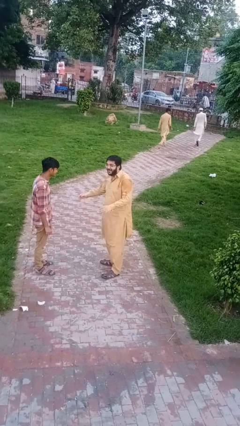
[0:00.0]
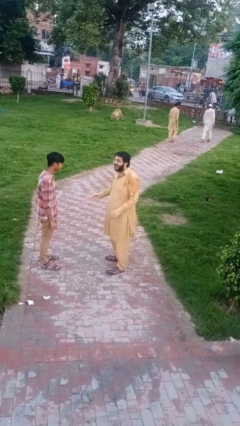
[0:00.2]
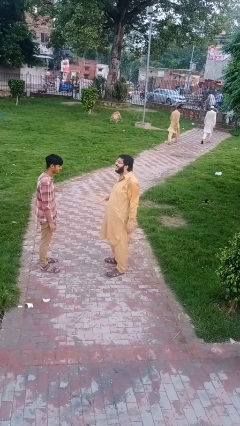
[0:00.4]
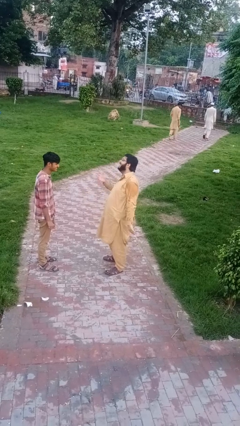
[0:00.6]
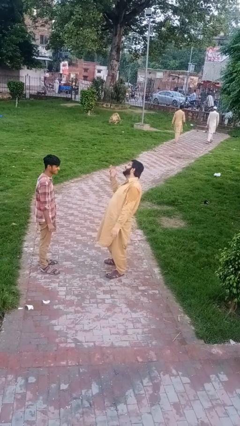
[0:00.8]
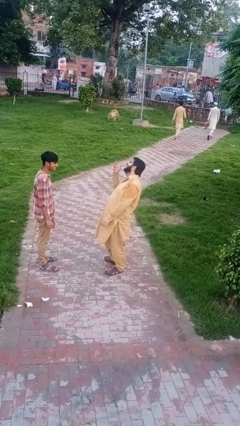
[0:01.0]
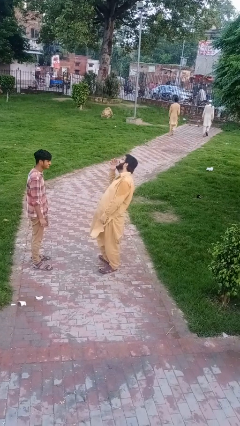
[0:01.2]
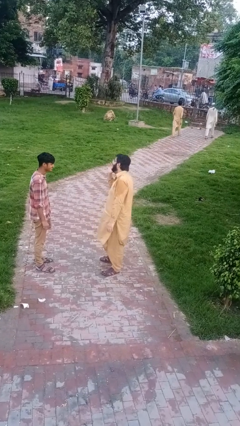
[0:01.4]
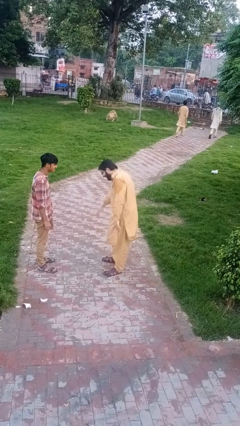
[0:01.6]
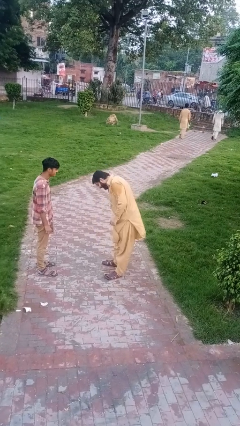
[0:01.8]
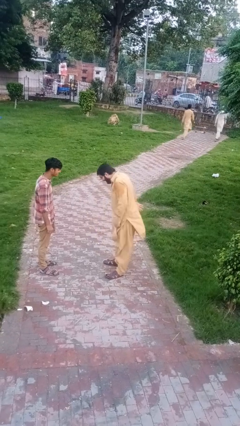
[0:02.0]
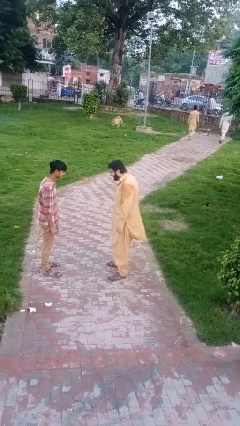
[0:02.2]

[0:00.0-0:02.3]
person laughs with person

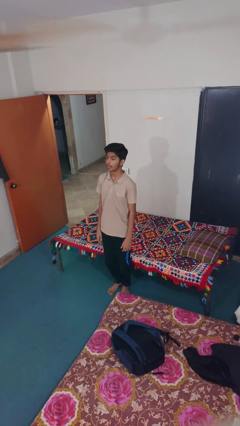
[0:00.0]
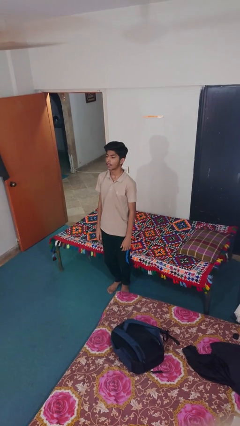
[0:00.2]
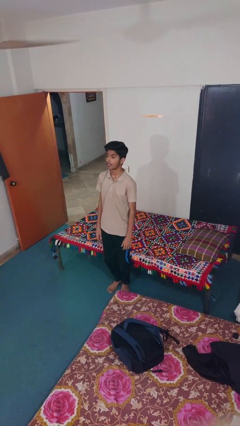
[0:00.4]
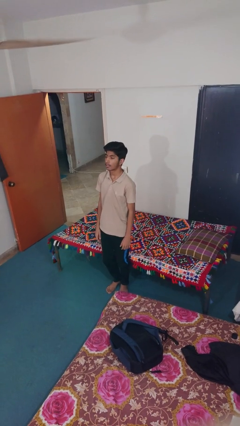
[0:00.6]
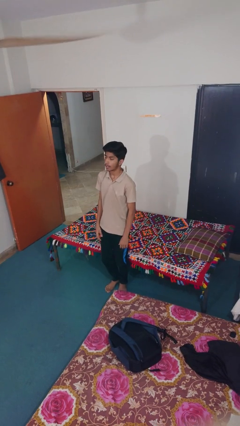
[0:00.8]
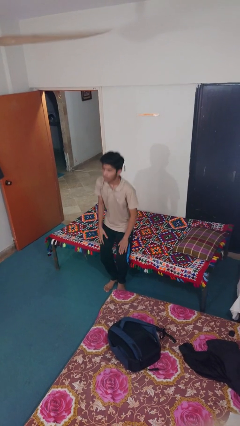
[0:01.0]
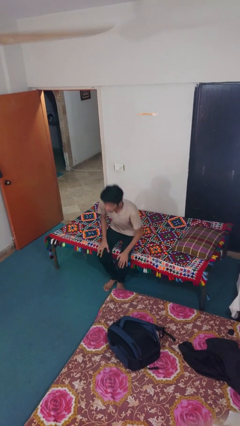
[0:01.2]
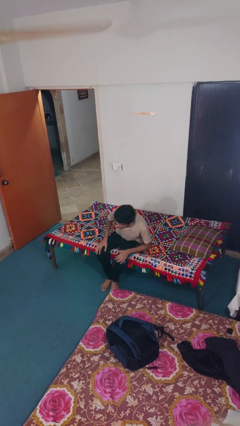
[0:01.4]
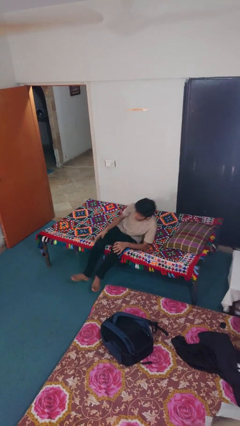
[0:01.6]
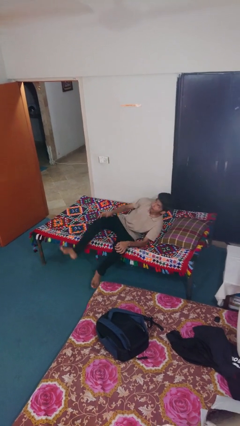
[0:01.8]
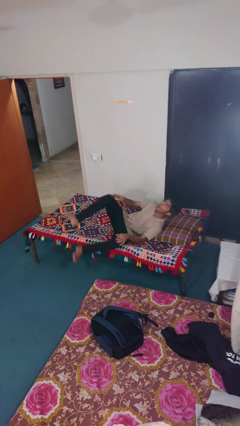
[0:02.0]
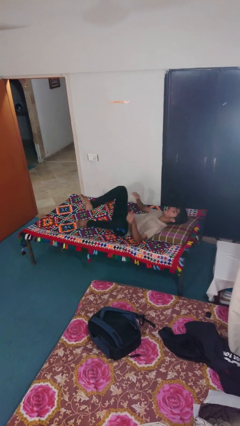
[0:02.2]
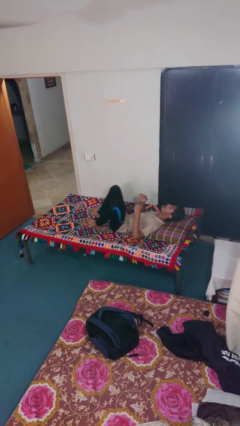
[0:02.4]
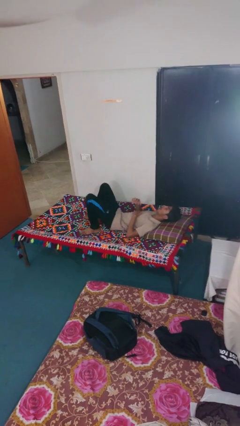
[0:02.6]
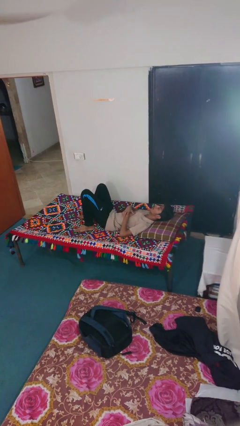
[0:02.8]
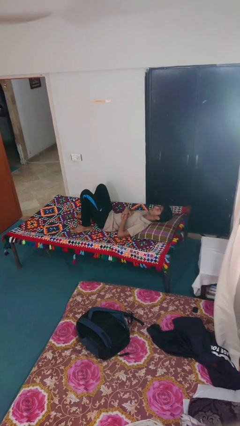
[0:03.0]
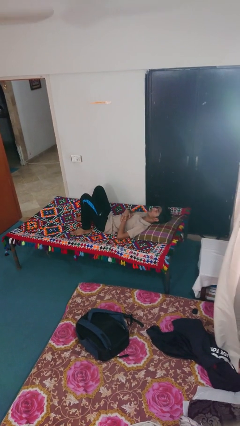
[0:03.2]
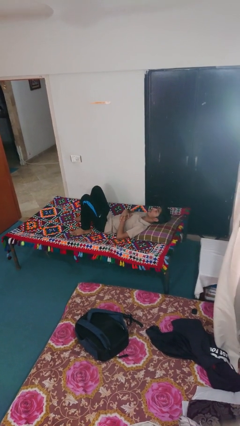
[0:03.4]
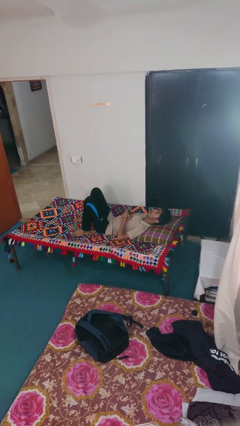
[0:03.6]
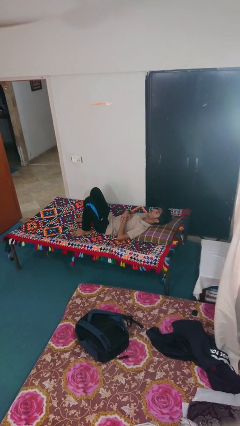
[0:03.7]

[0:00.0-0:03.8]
person lies down on bed

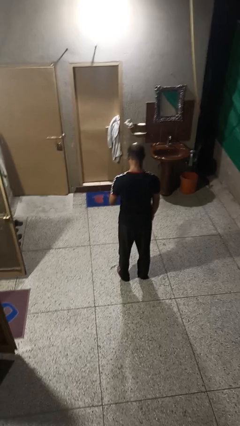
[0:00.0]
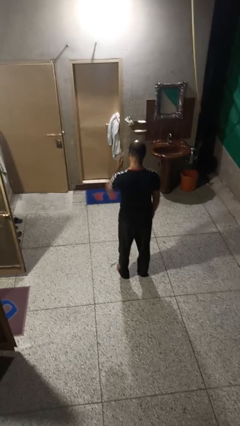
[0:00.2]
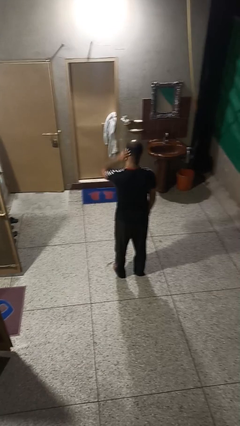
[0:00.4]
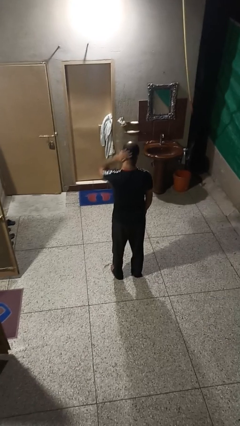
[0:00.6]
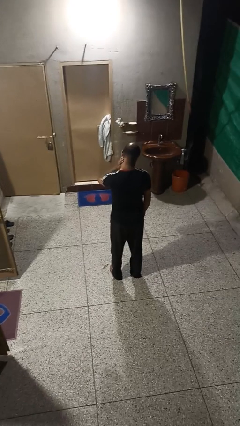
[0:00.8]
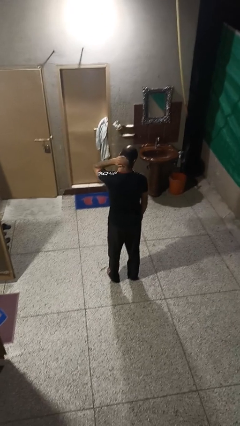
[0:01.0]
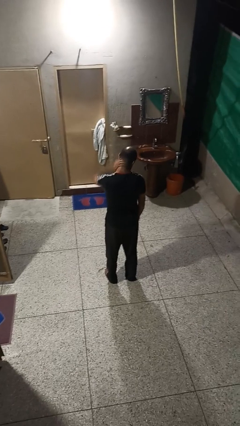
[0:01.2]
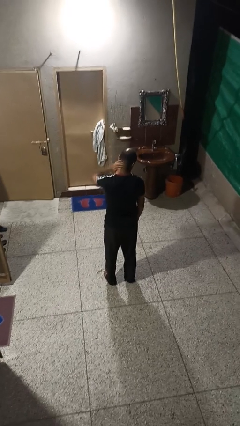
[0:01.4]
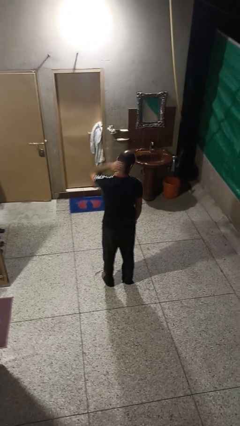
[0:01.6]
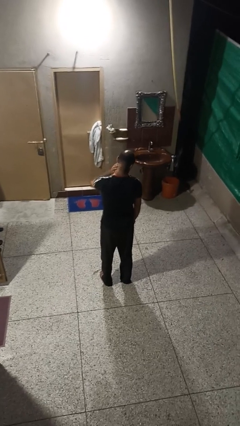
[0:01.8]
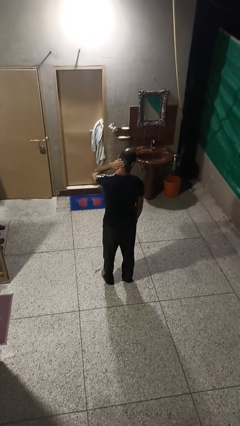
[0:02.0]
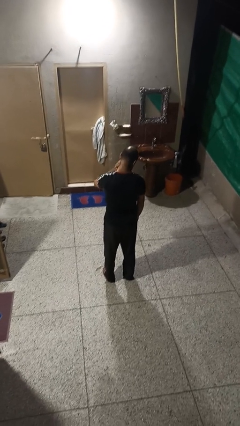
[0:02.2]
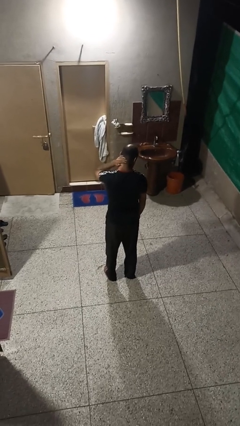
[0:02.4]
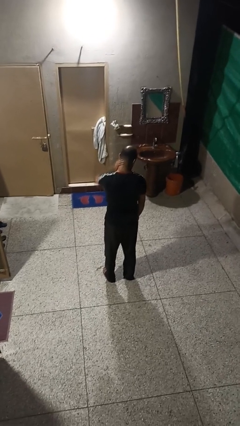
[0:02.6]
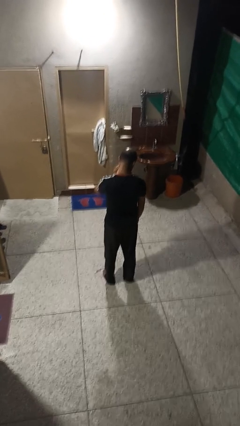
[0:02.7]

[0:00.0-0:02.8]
person rubs neck

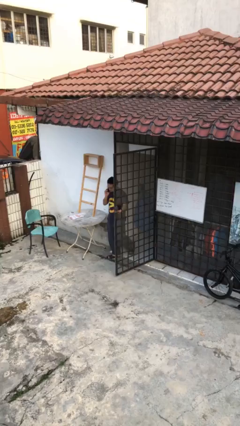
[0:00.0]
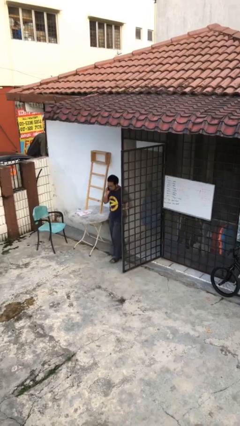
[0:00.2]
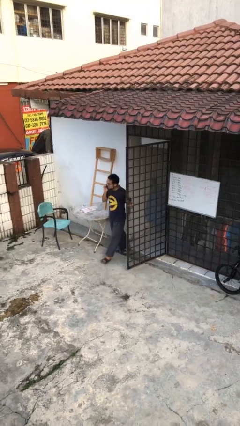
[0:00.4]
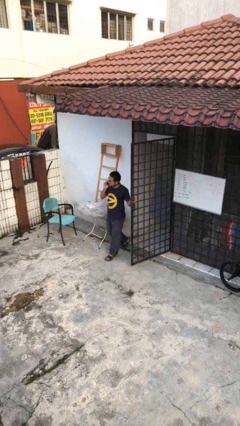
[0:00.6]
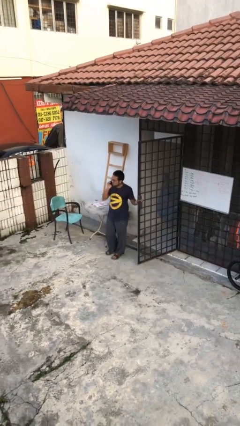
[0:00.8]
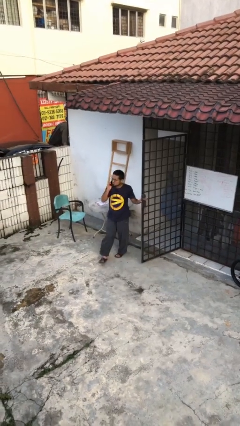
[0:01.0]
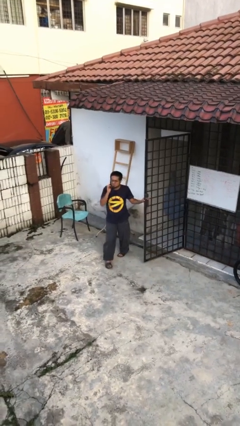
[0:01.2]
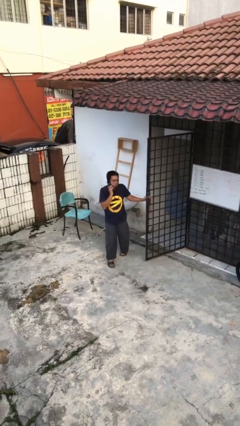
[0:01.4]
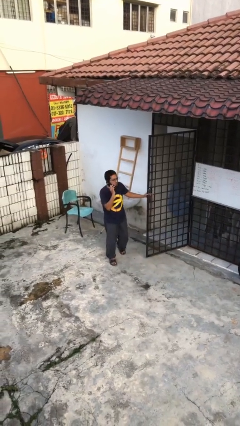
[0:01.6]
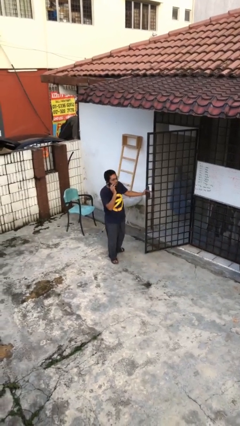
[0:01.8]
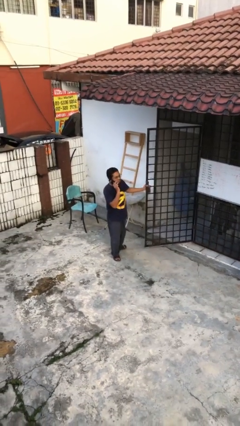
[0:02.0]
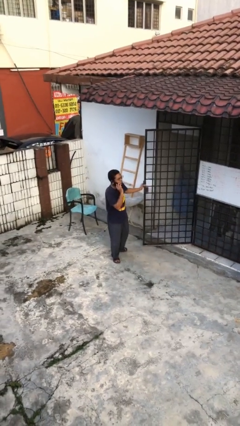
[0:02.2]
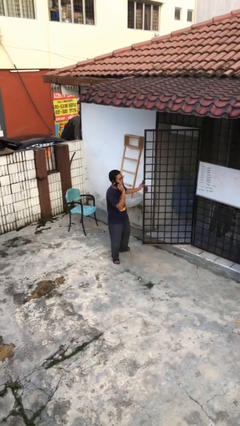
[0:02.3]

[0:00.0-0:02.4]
person enters scene through structure

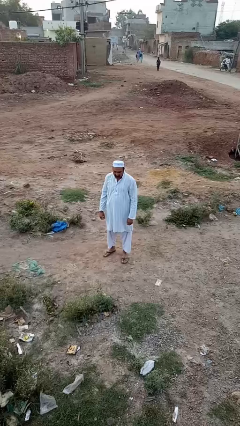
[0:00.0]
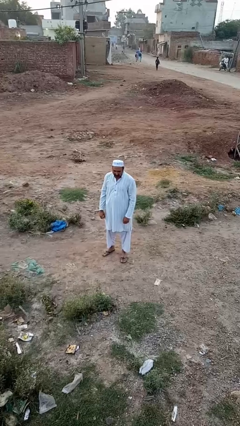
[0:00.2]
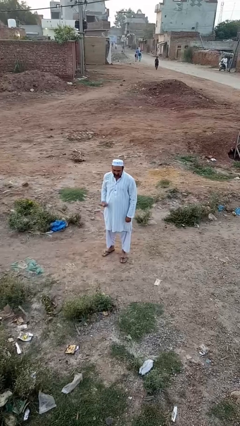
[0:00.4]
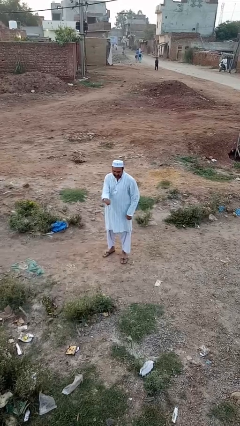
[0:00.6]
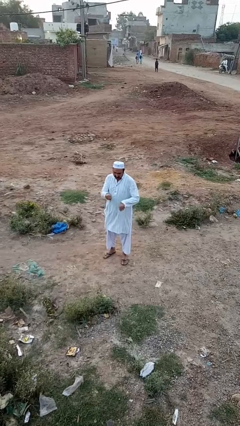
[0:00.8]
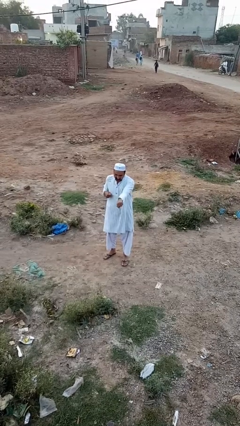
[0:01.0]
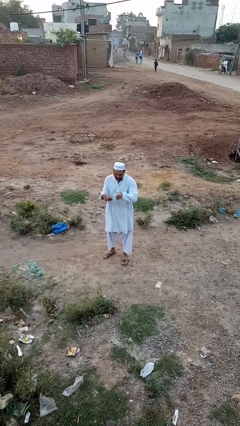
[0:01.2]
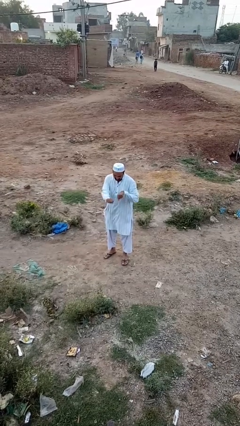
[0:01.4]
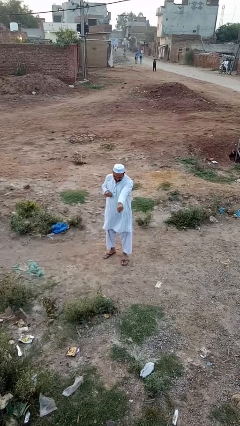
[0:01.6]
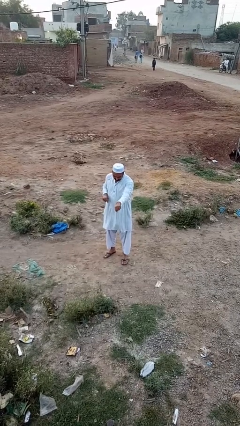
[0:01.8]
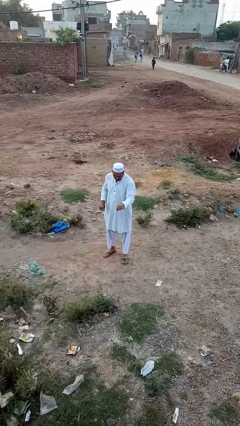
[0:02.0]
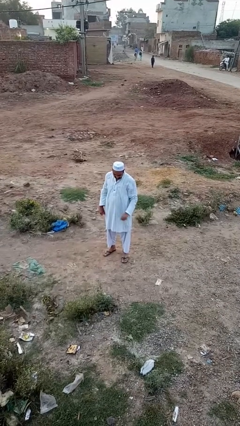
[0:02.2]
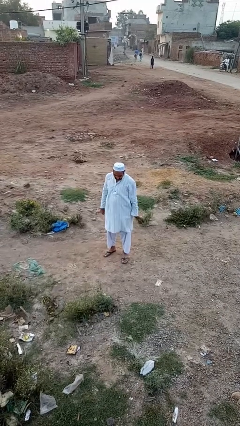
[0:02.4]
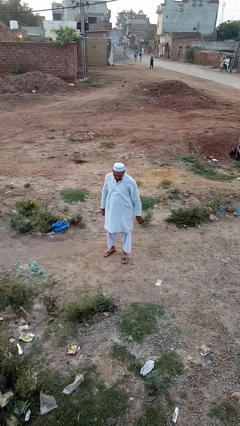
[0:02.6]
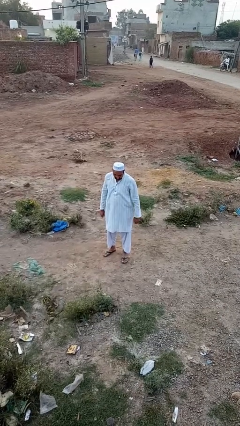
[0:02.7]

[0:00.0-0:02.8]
person punches

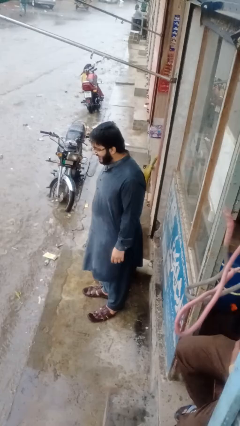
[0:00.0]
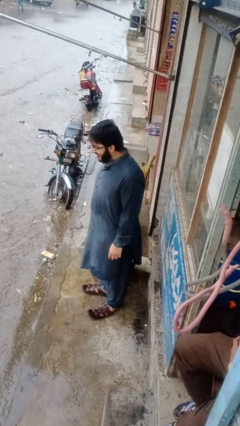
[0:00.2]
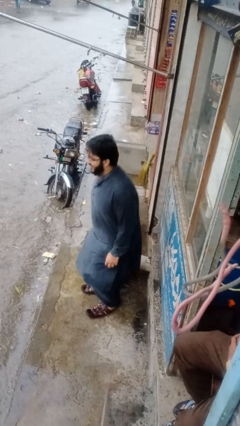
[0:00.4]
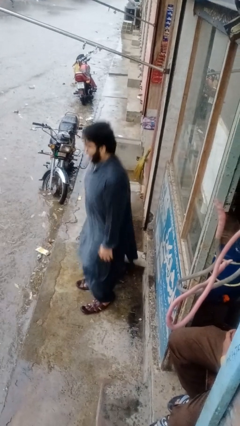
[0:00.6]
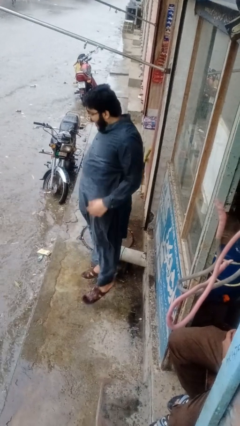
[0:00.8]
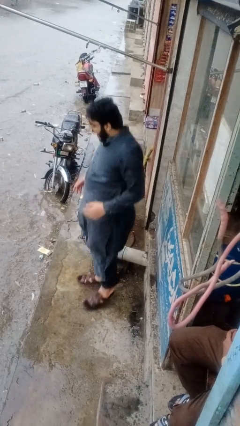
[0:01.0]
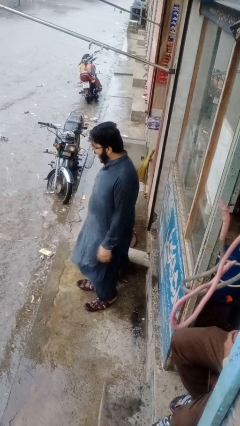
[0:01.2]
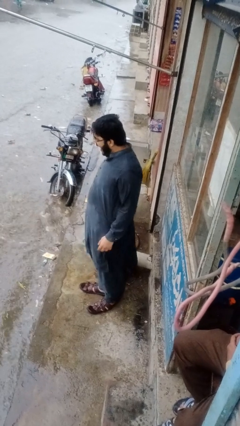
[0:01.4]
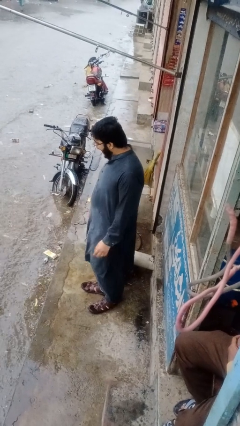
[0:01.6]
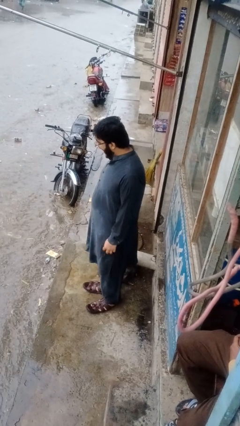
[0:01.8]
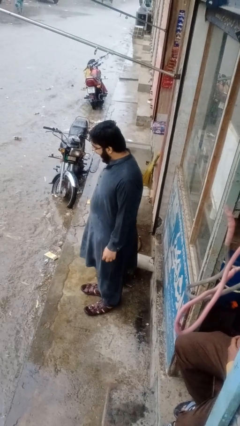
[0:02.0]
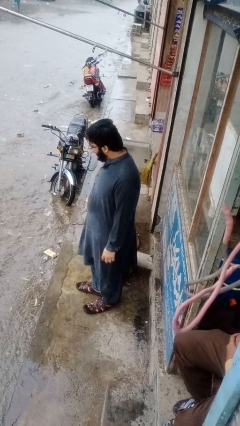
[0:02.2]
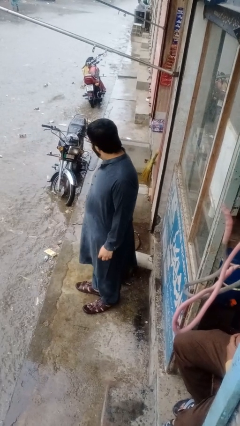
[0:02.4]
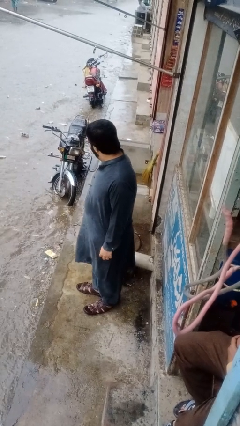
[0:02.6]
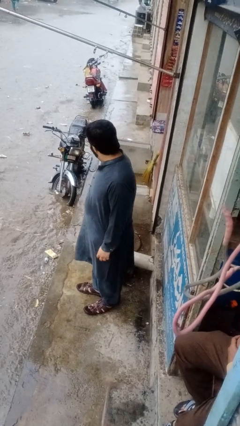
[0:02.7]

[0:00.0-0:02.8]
person jumps

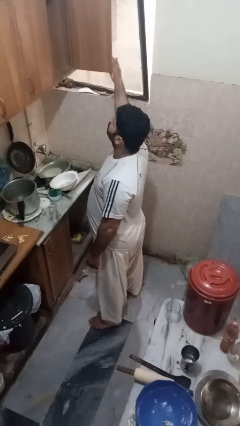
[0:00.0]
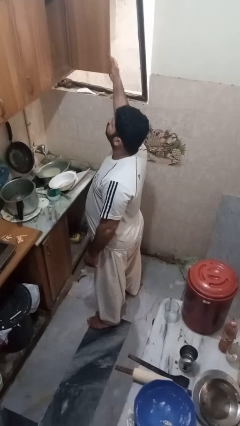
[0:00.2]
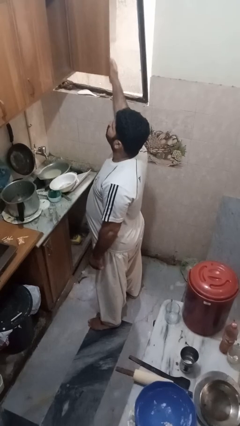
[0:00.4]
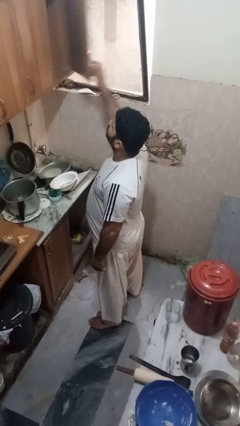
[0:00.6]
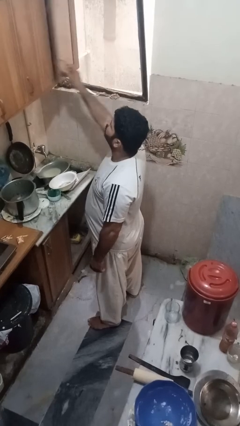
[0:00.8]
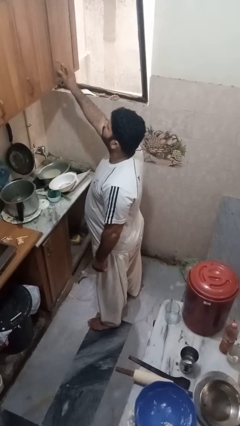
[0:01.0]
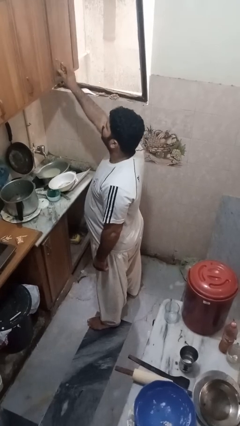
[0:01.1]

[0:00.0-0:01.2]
person closes cabinet
